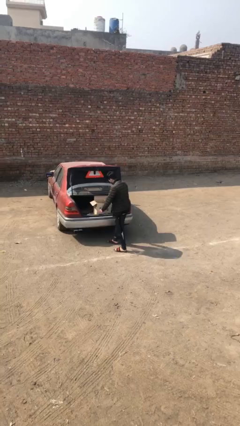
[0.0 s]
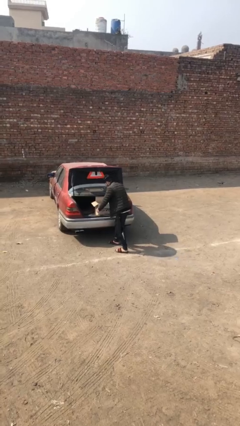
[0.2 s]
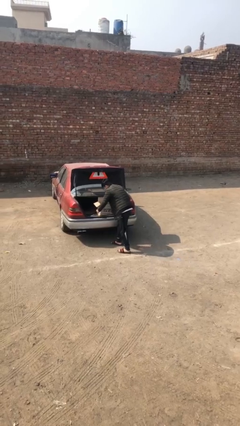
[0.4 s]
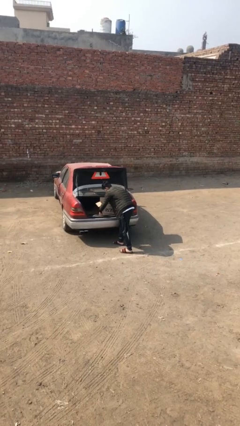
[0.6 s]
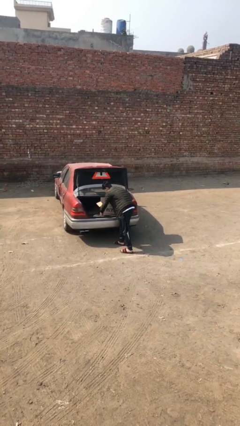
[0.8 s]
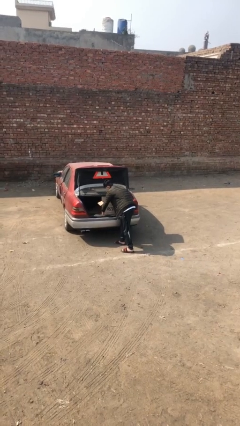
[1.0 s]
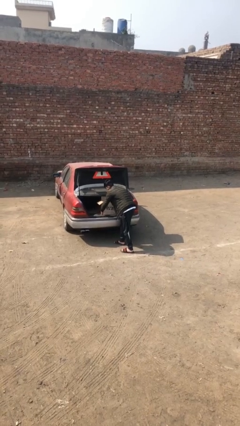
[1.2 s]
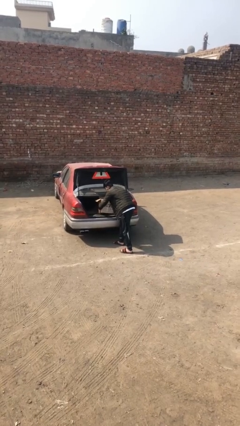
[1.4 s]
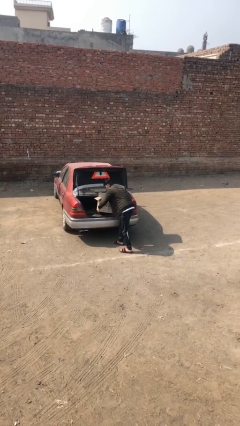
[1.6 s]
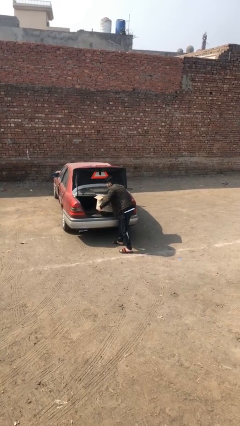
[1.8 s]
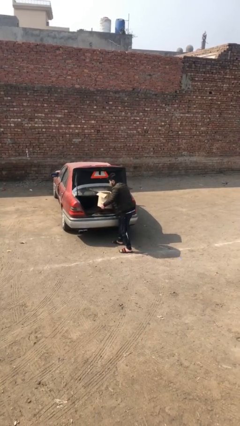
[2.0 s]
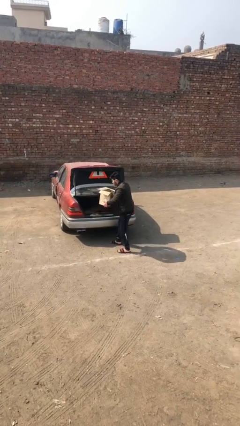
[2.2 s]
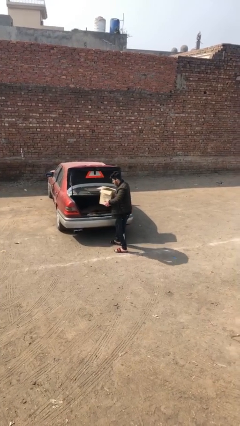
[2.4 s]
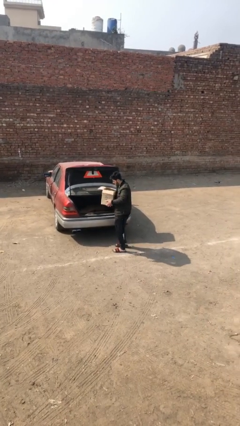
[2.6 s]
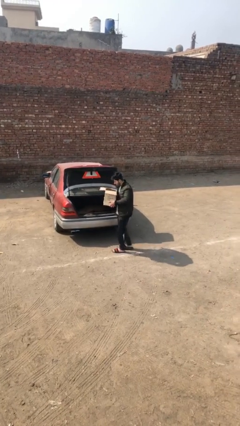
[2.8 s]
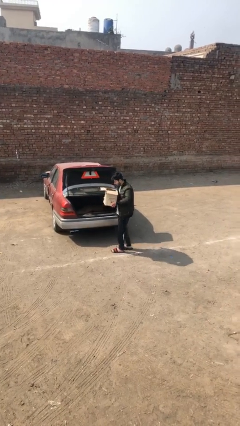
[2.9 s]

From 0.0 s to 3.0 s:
person unloads car

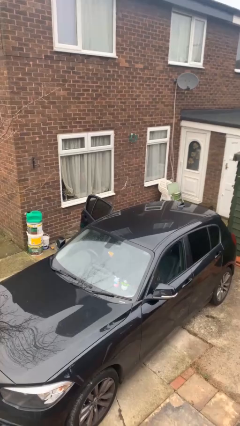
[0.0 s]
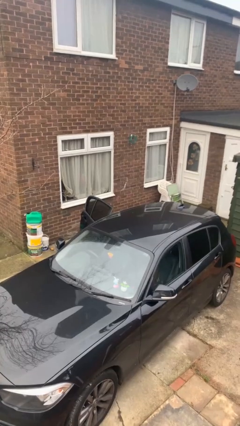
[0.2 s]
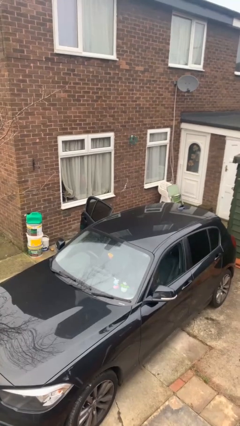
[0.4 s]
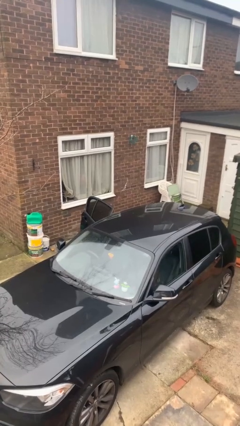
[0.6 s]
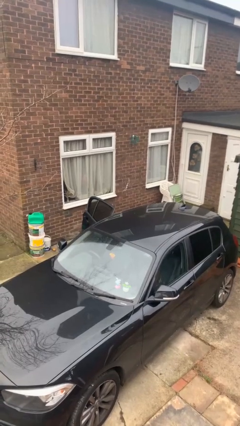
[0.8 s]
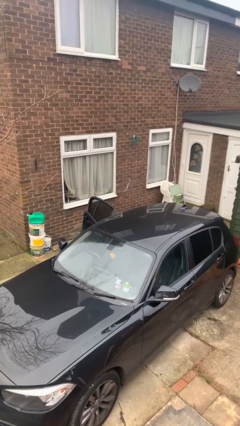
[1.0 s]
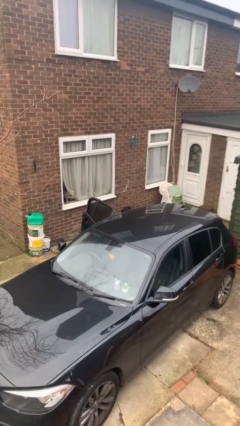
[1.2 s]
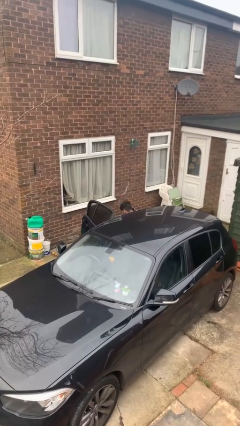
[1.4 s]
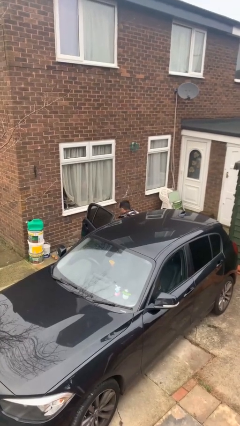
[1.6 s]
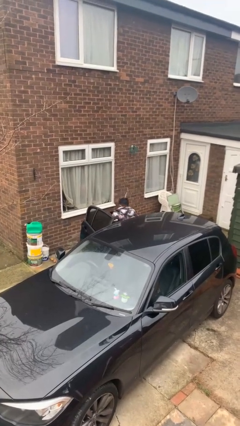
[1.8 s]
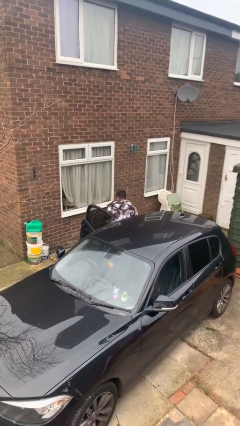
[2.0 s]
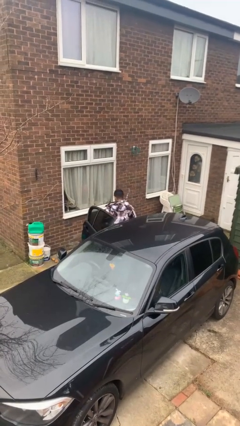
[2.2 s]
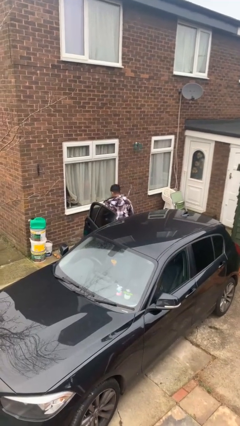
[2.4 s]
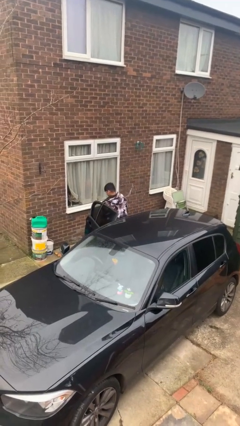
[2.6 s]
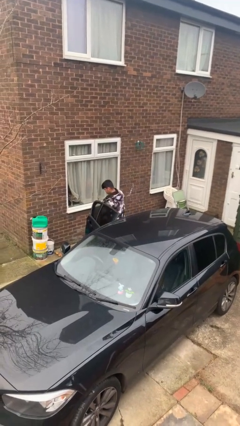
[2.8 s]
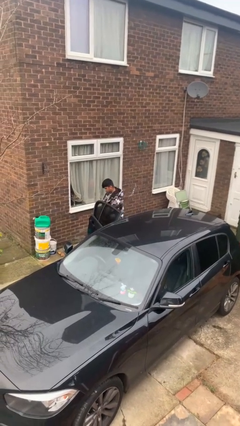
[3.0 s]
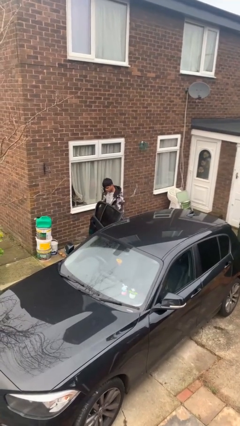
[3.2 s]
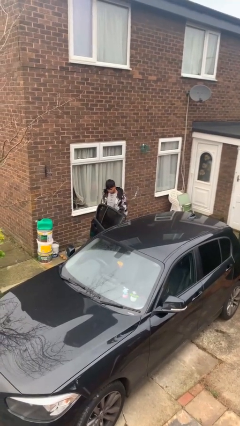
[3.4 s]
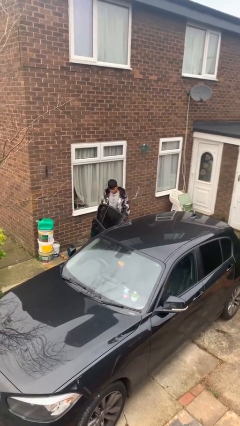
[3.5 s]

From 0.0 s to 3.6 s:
person exits car

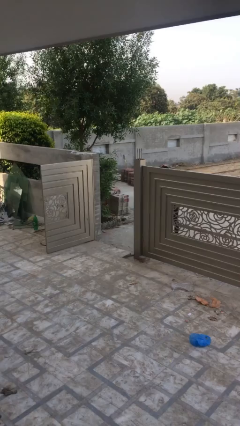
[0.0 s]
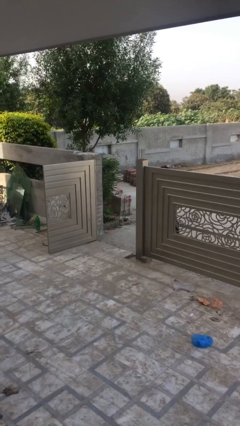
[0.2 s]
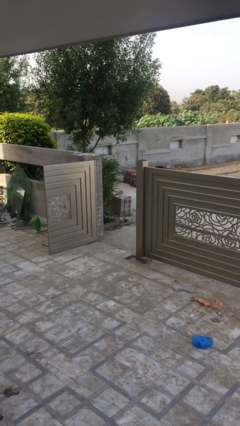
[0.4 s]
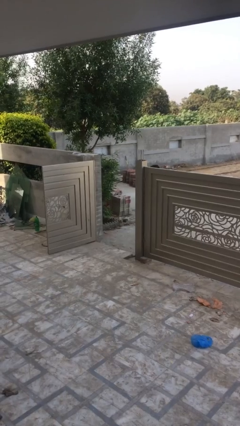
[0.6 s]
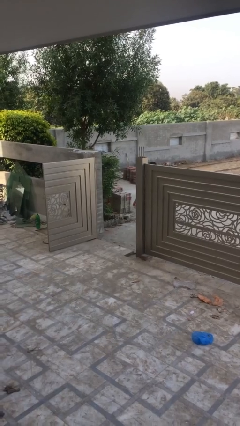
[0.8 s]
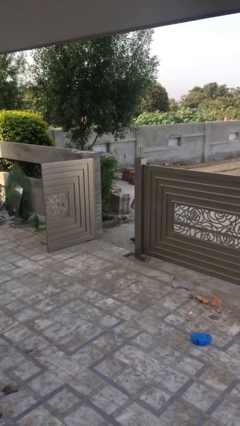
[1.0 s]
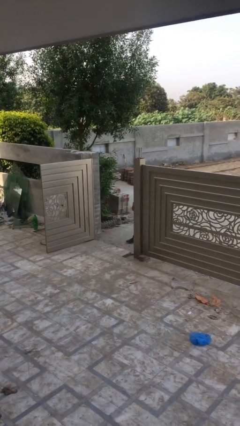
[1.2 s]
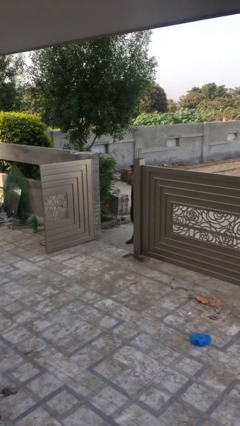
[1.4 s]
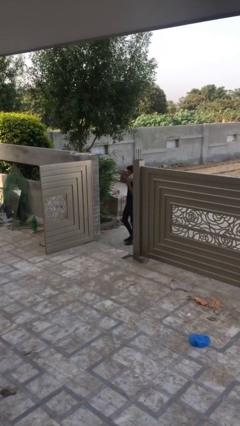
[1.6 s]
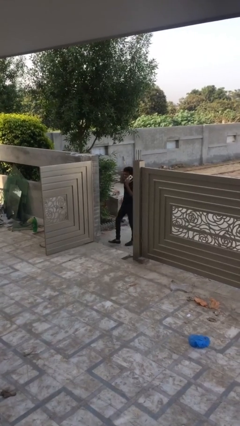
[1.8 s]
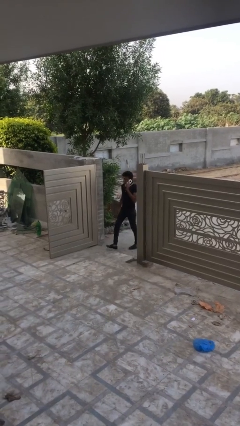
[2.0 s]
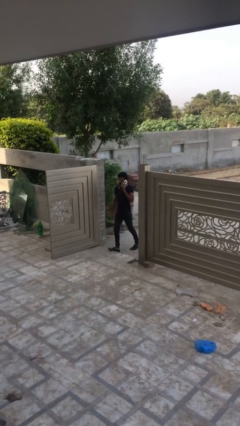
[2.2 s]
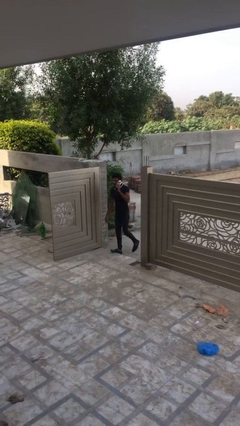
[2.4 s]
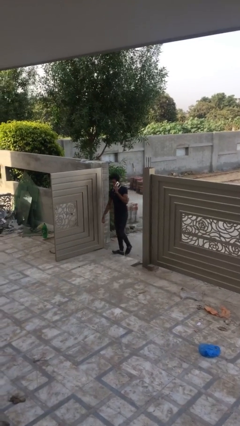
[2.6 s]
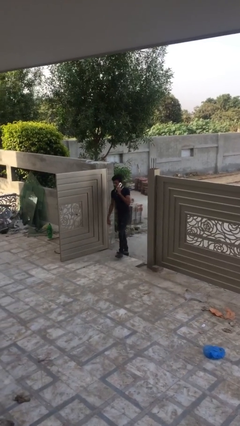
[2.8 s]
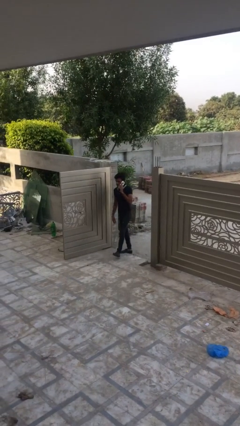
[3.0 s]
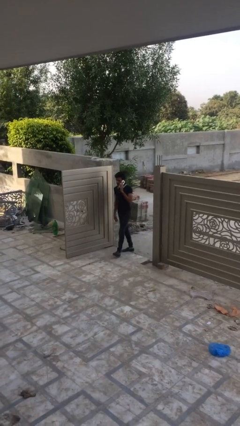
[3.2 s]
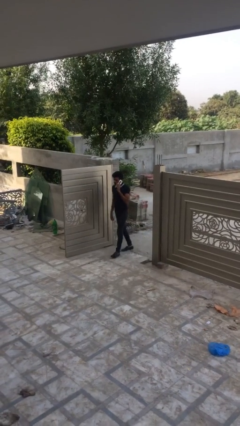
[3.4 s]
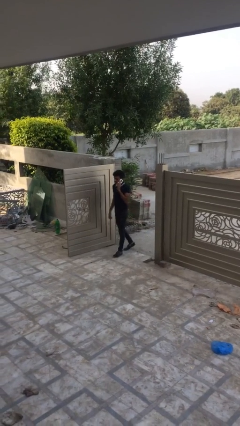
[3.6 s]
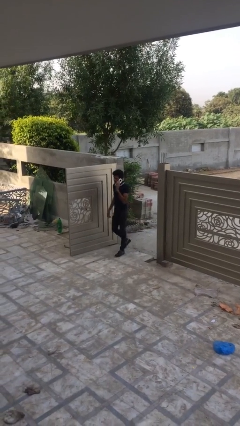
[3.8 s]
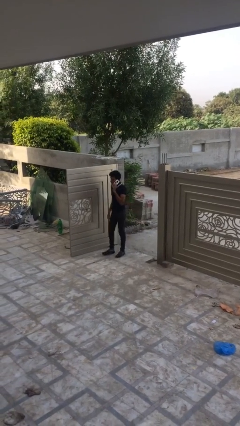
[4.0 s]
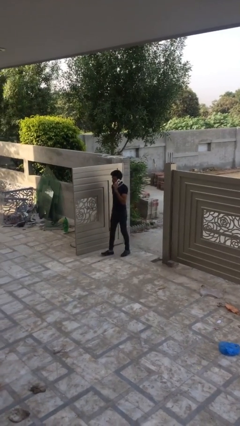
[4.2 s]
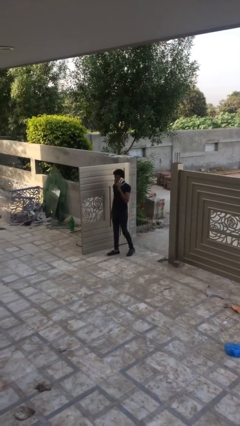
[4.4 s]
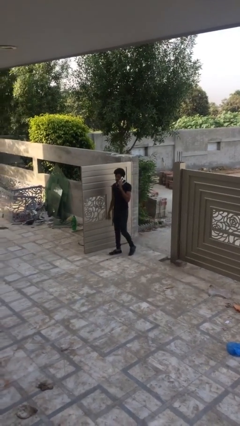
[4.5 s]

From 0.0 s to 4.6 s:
person enters scene through structure

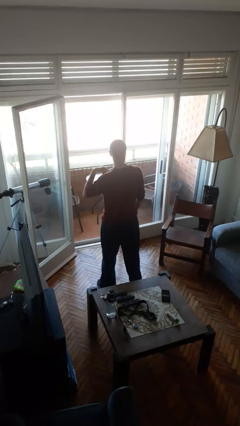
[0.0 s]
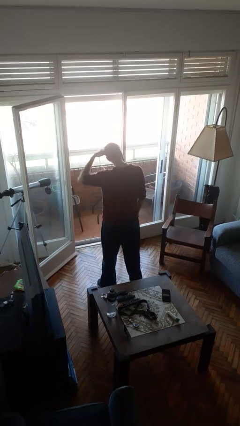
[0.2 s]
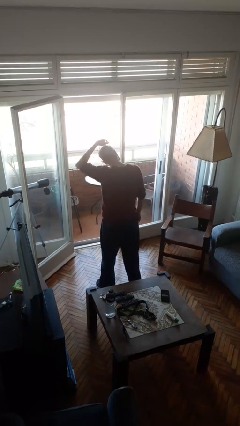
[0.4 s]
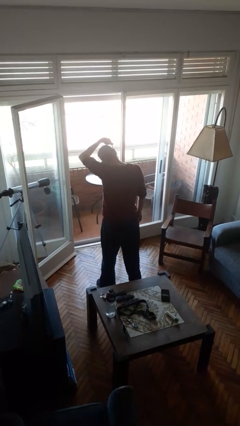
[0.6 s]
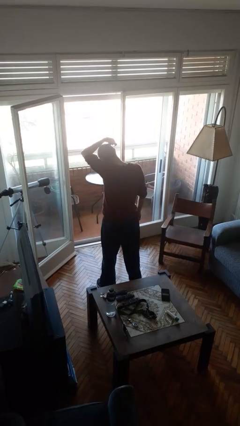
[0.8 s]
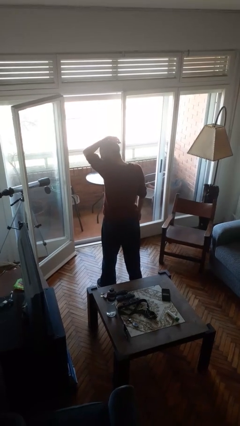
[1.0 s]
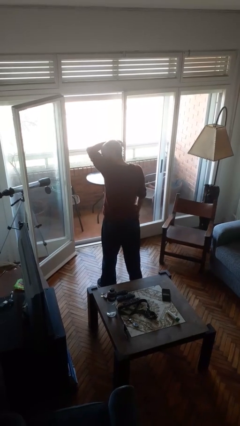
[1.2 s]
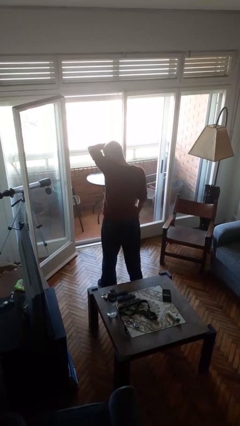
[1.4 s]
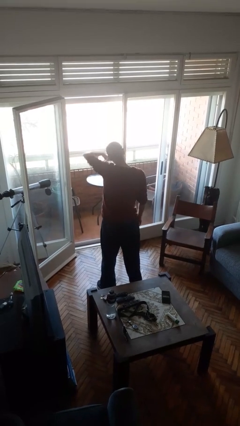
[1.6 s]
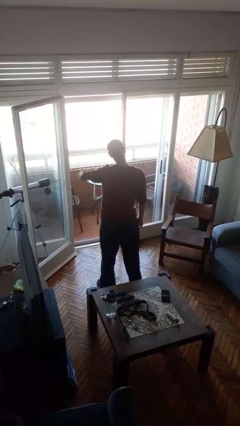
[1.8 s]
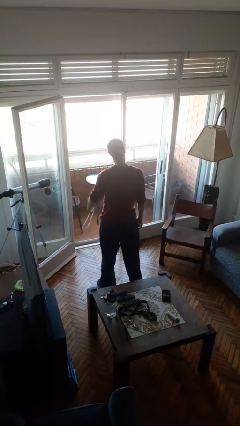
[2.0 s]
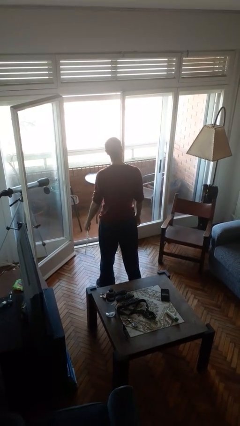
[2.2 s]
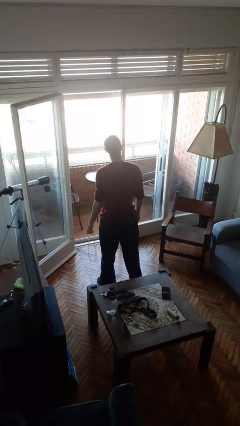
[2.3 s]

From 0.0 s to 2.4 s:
person takes off necklace

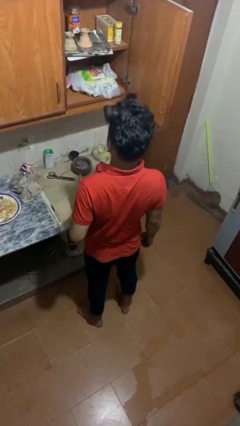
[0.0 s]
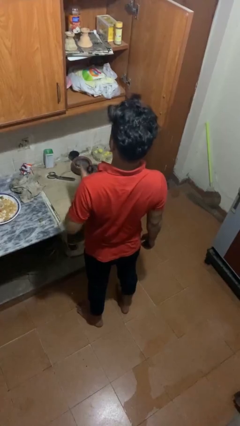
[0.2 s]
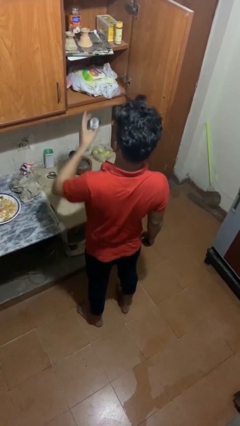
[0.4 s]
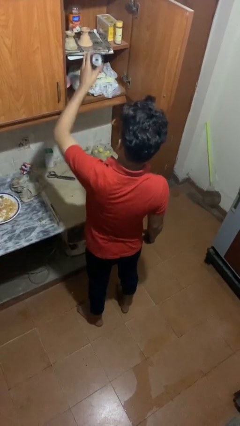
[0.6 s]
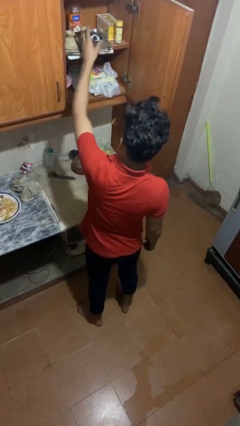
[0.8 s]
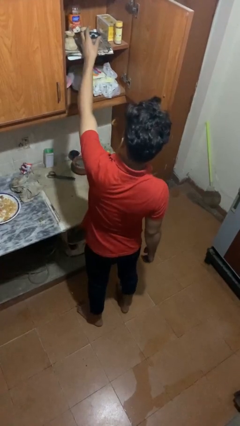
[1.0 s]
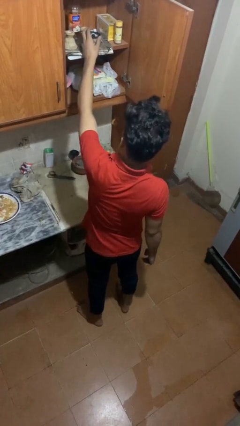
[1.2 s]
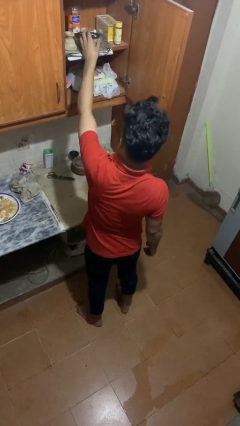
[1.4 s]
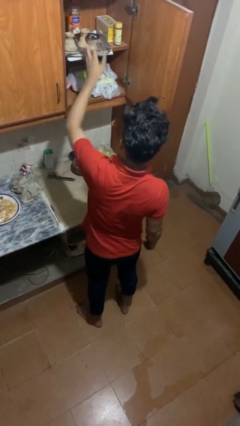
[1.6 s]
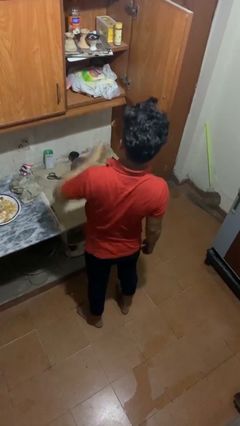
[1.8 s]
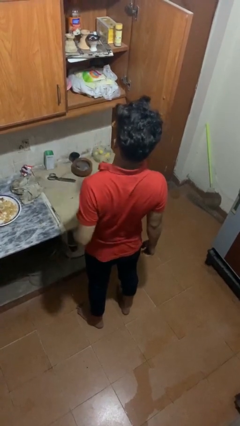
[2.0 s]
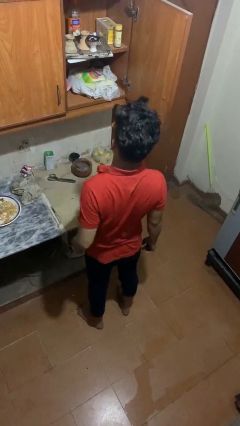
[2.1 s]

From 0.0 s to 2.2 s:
person puts object in cabinet

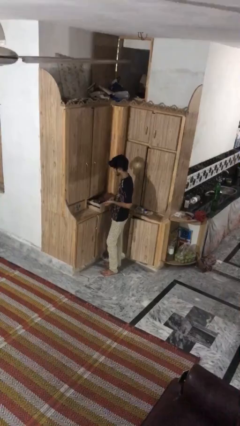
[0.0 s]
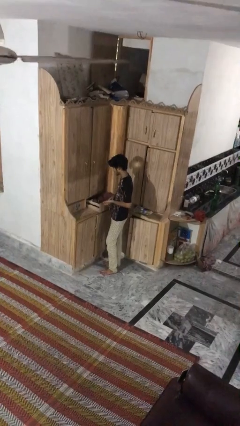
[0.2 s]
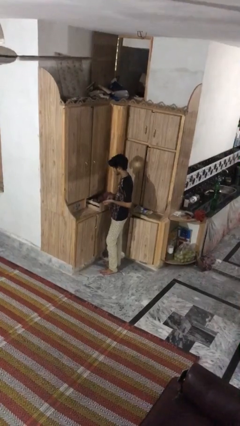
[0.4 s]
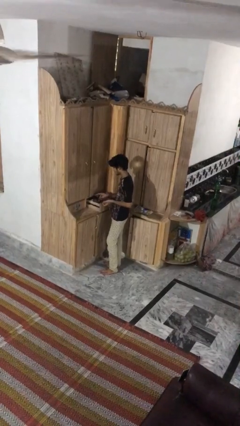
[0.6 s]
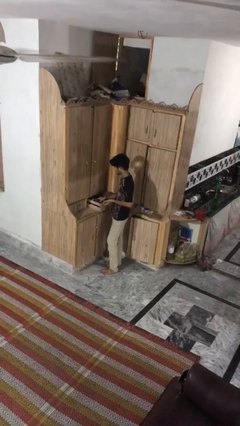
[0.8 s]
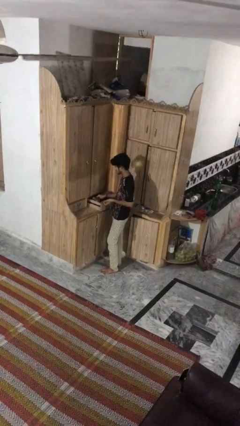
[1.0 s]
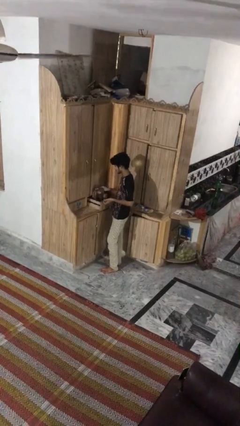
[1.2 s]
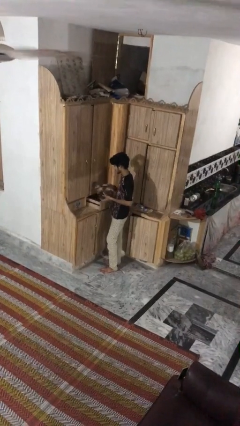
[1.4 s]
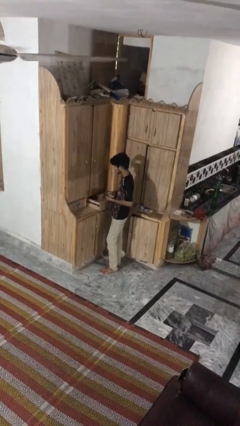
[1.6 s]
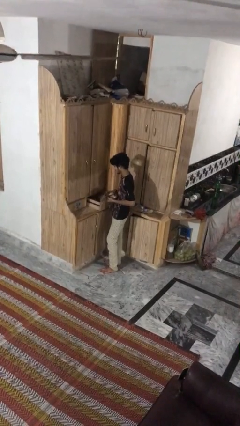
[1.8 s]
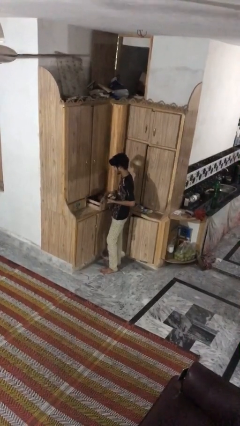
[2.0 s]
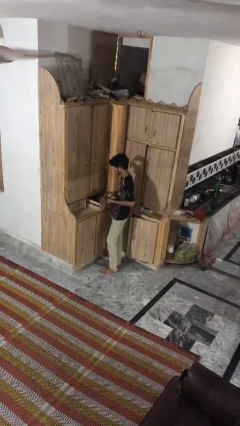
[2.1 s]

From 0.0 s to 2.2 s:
person takes clothes from dresser
